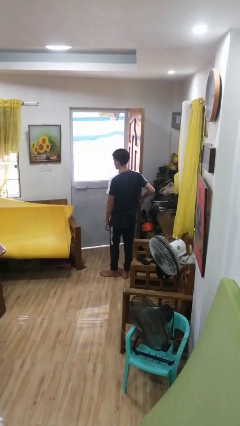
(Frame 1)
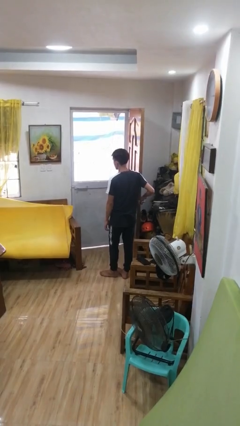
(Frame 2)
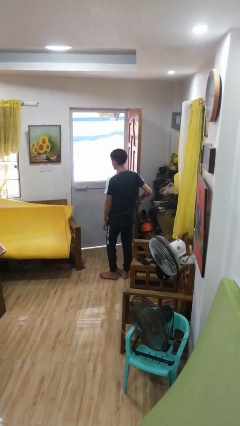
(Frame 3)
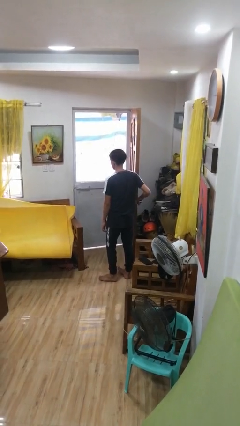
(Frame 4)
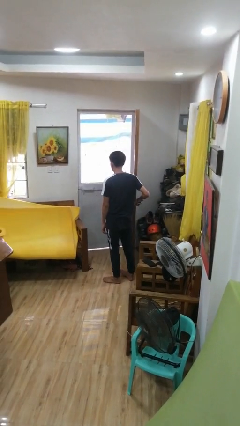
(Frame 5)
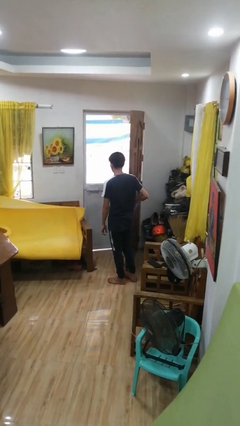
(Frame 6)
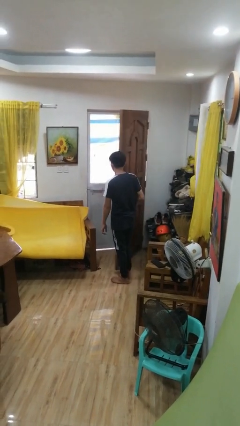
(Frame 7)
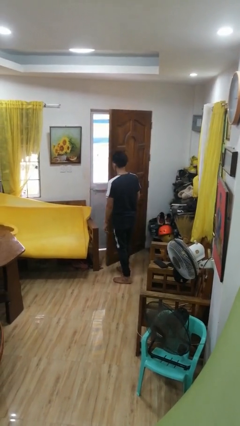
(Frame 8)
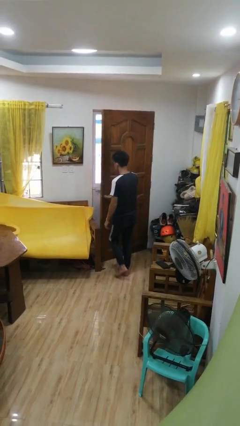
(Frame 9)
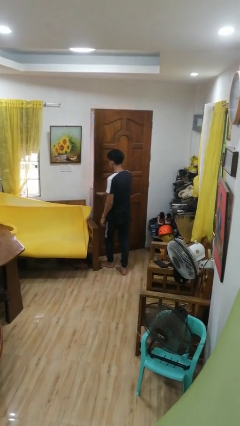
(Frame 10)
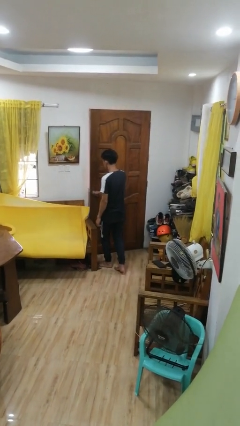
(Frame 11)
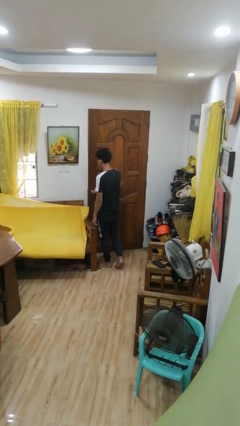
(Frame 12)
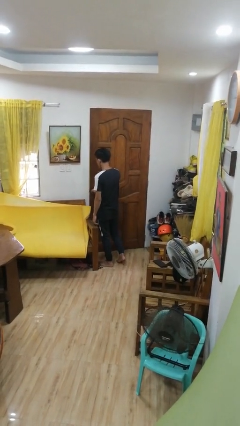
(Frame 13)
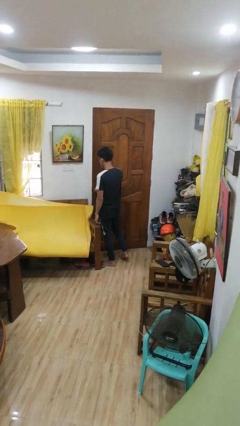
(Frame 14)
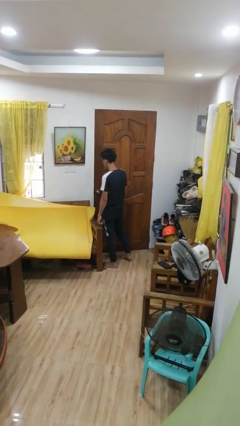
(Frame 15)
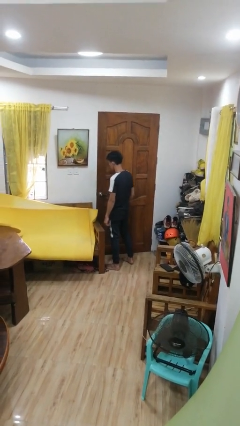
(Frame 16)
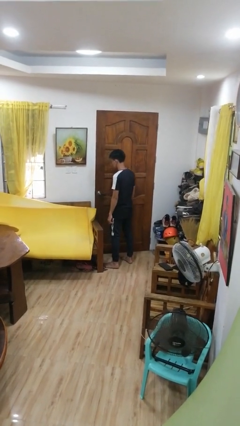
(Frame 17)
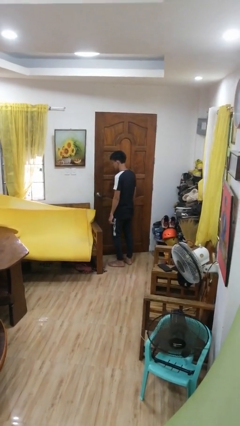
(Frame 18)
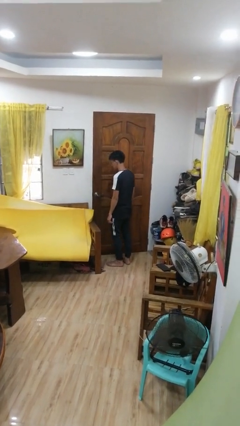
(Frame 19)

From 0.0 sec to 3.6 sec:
person closes facility door

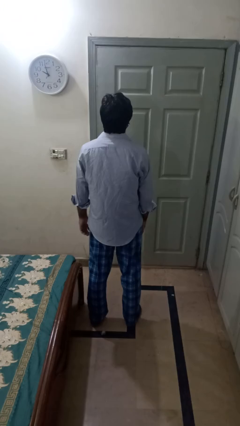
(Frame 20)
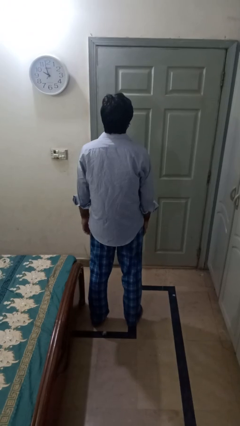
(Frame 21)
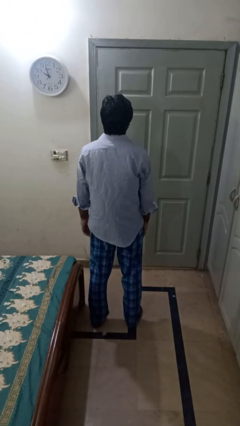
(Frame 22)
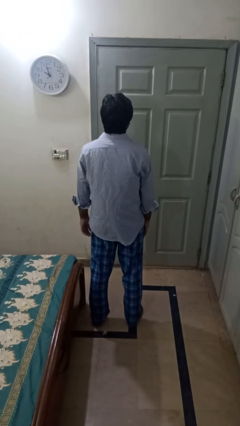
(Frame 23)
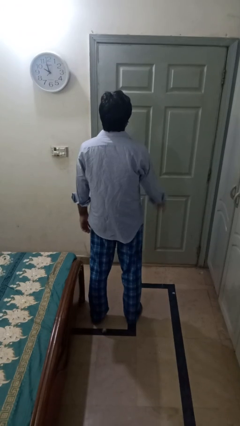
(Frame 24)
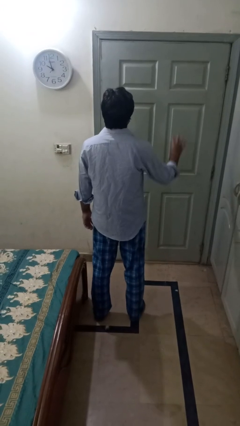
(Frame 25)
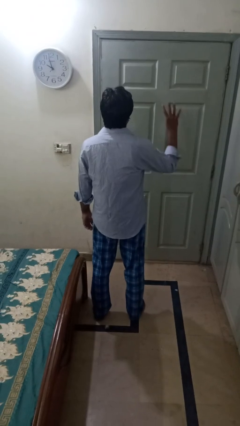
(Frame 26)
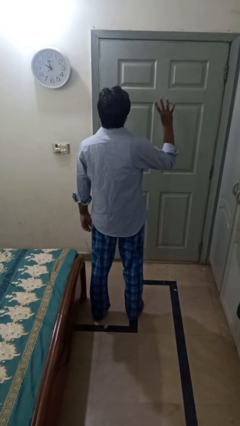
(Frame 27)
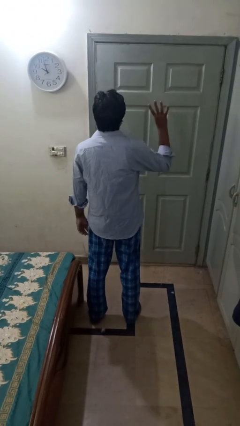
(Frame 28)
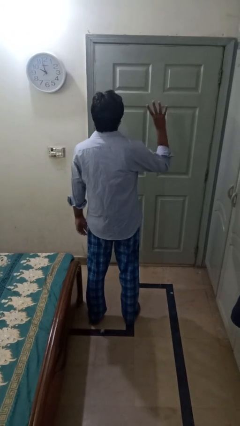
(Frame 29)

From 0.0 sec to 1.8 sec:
person gestures number four

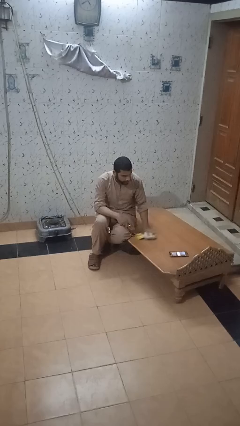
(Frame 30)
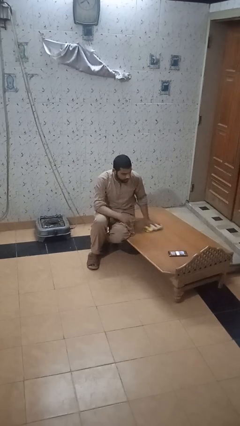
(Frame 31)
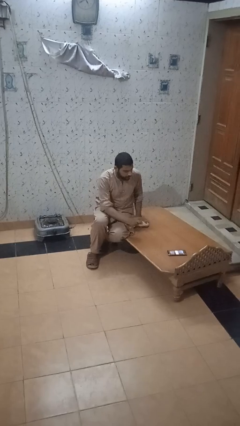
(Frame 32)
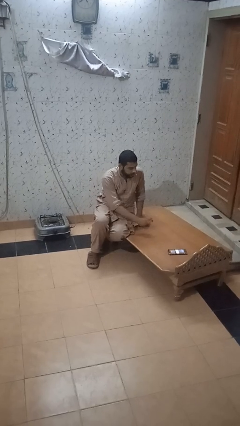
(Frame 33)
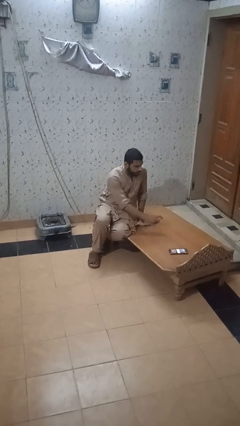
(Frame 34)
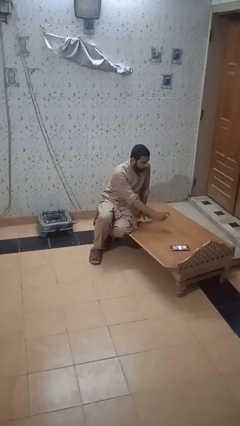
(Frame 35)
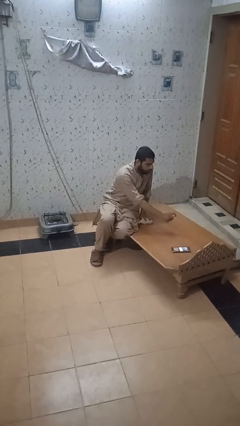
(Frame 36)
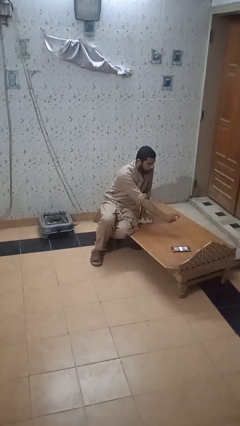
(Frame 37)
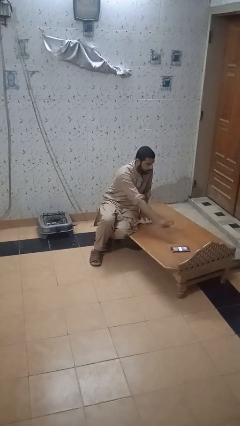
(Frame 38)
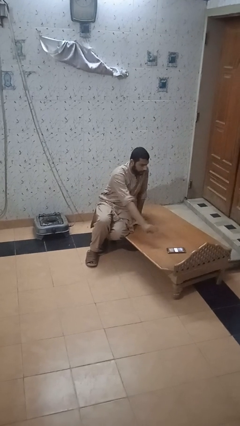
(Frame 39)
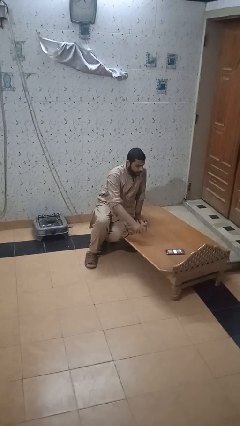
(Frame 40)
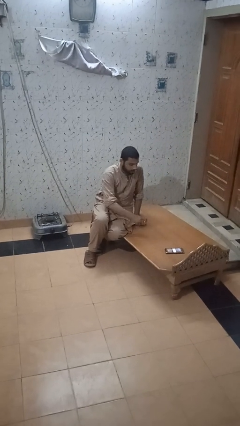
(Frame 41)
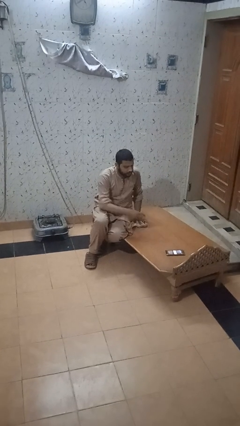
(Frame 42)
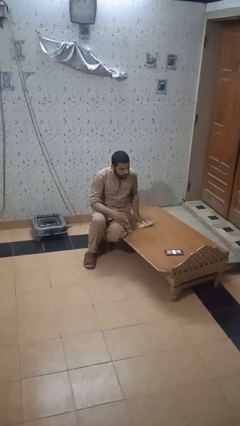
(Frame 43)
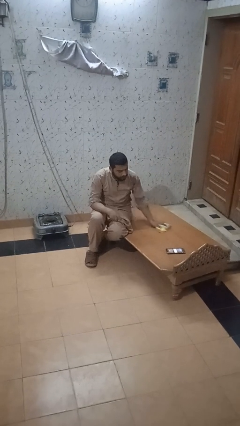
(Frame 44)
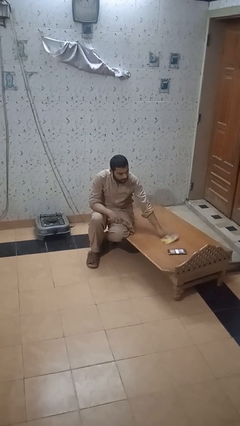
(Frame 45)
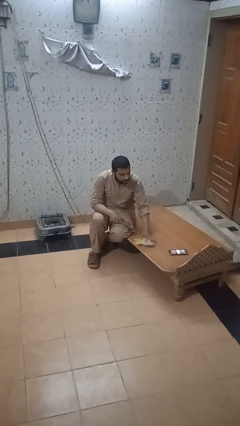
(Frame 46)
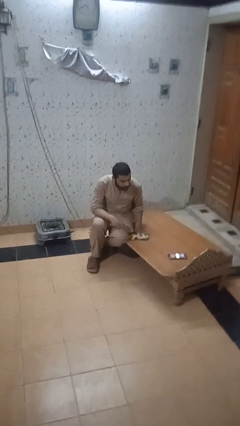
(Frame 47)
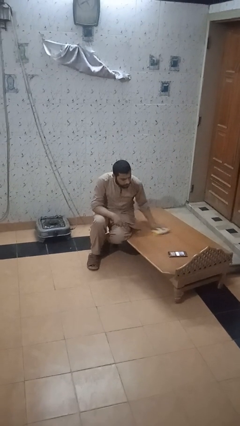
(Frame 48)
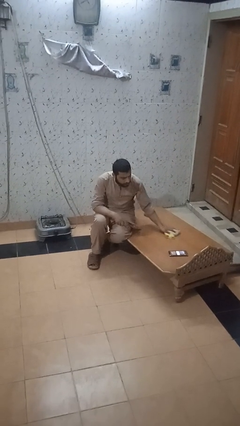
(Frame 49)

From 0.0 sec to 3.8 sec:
person sprays from bottle

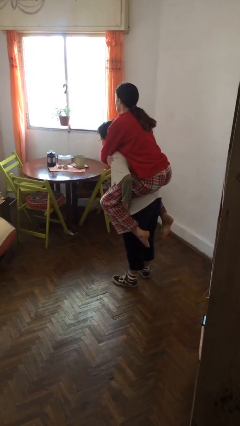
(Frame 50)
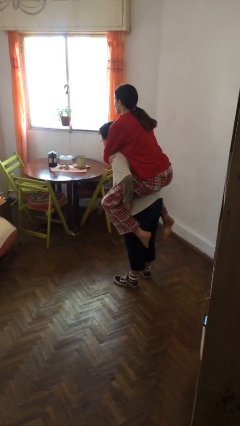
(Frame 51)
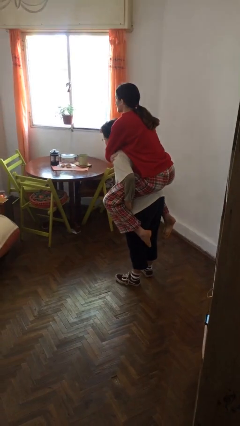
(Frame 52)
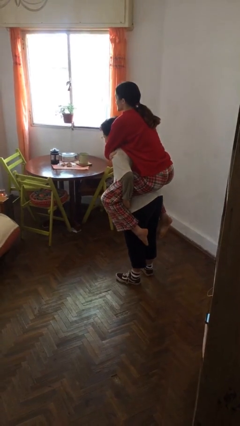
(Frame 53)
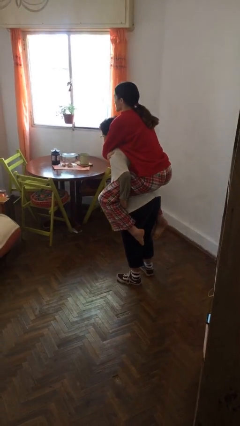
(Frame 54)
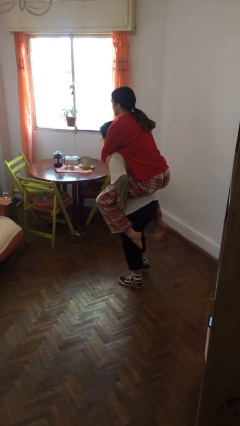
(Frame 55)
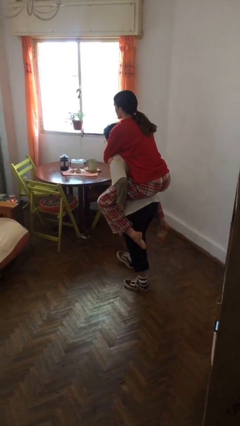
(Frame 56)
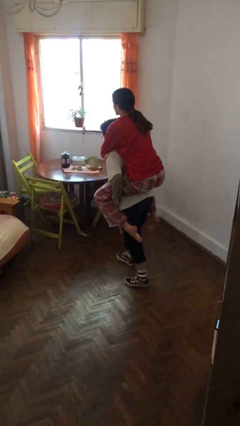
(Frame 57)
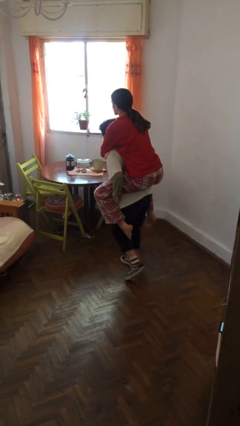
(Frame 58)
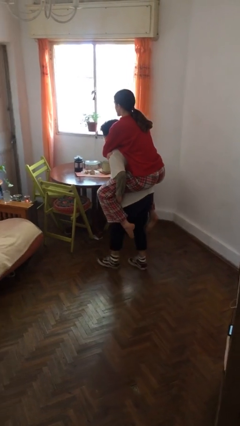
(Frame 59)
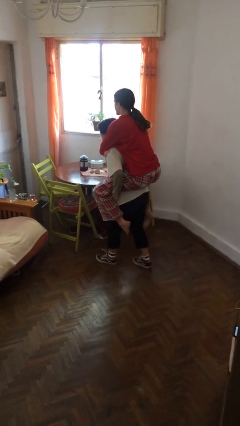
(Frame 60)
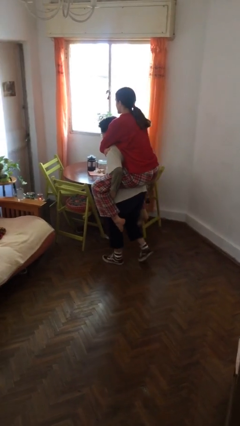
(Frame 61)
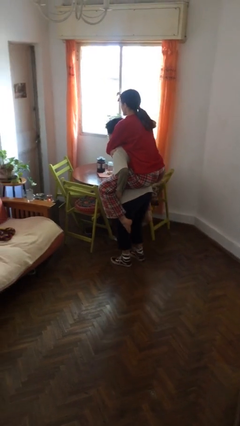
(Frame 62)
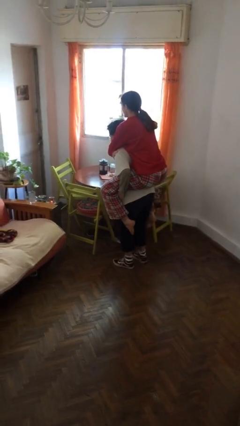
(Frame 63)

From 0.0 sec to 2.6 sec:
person carries person on back

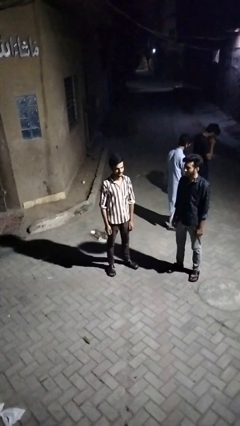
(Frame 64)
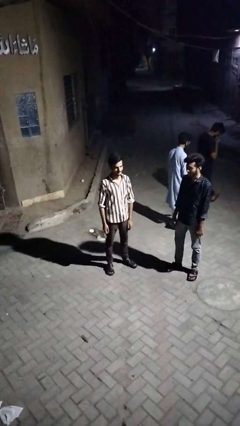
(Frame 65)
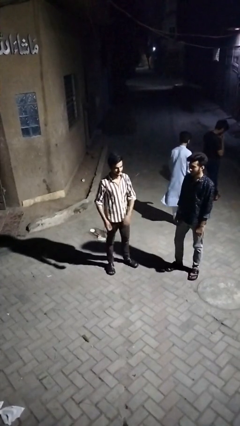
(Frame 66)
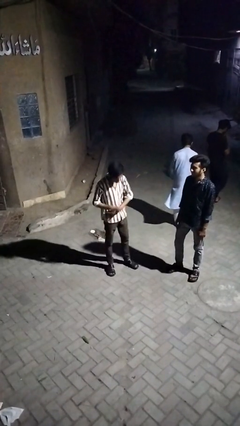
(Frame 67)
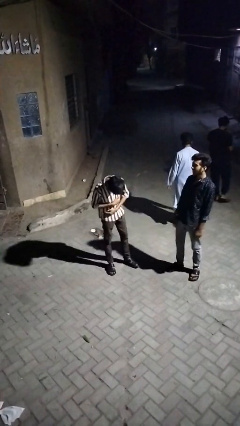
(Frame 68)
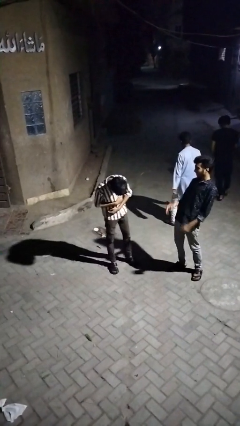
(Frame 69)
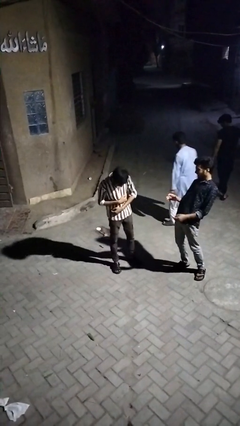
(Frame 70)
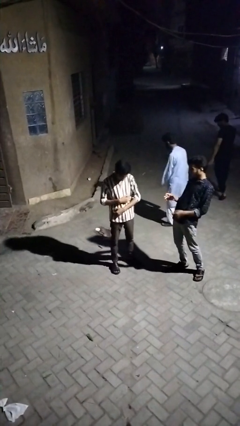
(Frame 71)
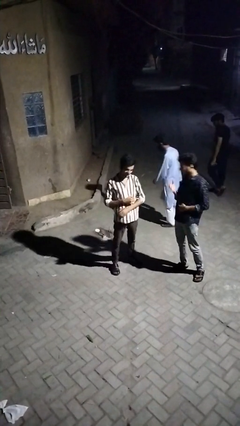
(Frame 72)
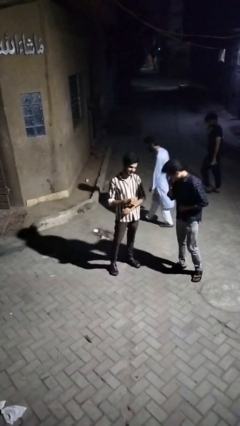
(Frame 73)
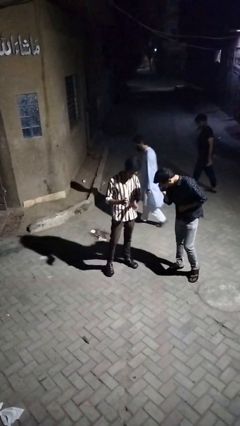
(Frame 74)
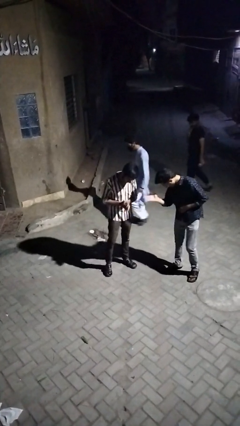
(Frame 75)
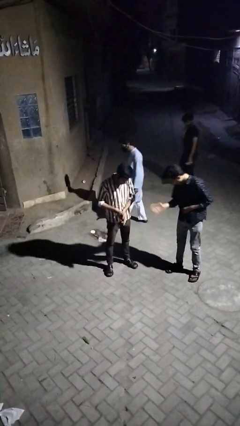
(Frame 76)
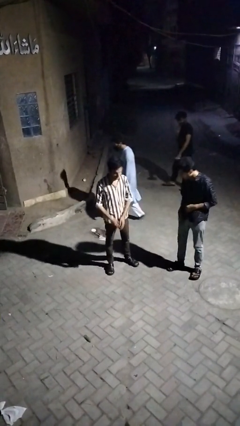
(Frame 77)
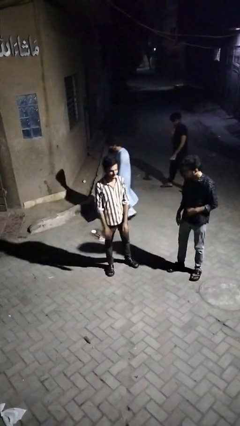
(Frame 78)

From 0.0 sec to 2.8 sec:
person laughs with person

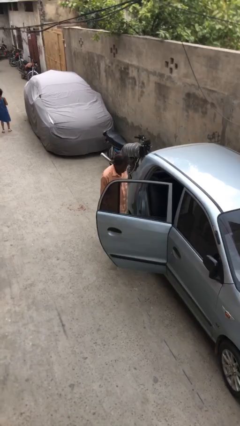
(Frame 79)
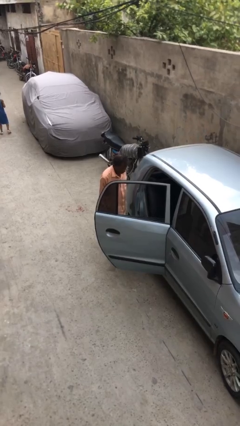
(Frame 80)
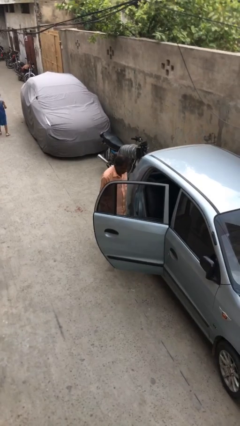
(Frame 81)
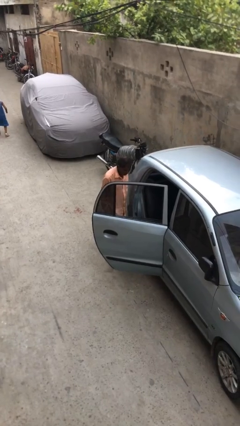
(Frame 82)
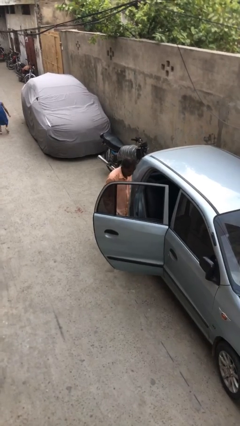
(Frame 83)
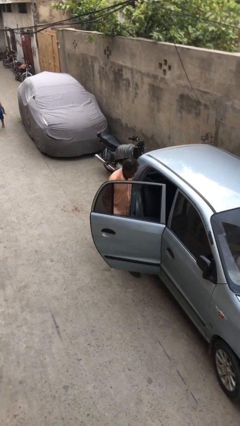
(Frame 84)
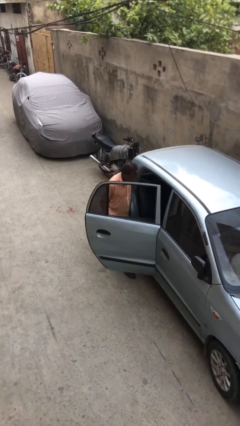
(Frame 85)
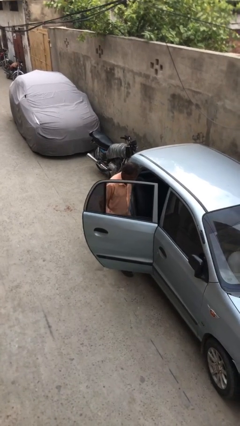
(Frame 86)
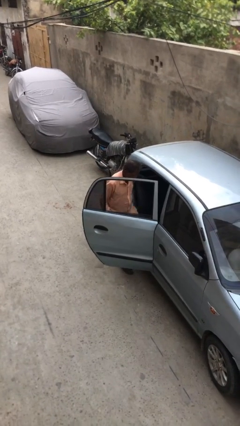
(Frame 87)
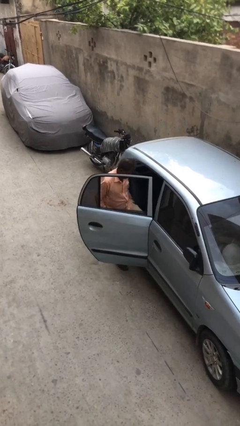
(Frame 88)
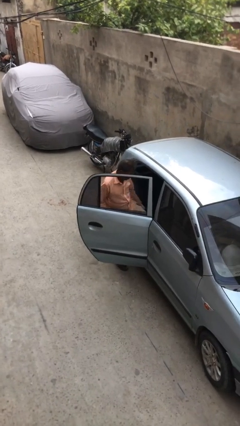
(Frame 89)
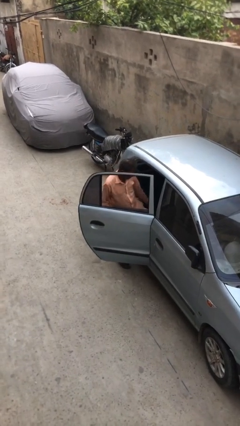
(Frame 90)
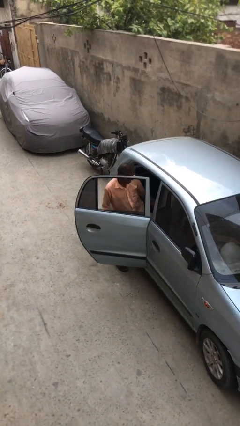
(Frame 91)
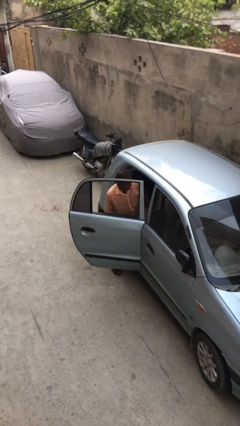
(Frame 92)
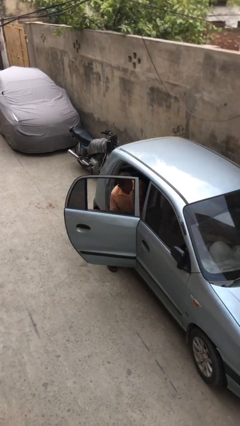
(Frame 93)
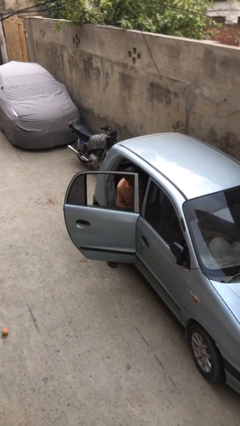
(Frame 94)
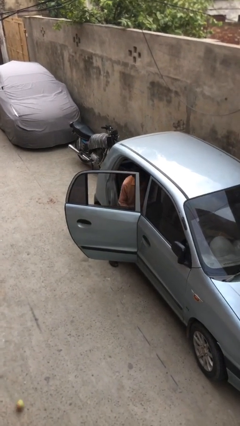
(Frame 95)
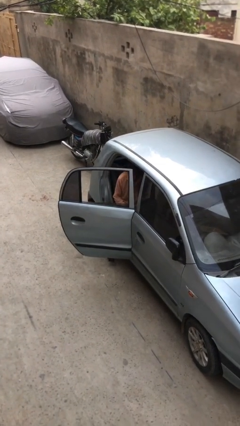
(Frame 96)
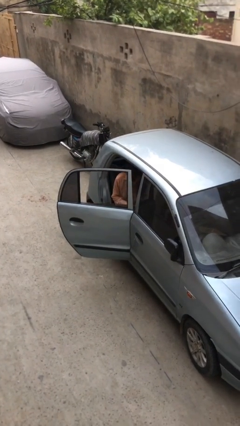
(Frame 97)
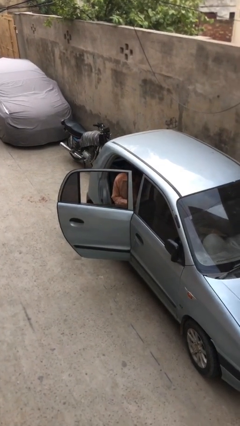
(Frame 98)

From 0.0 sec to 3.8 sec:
person enters car
